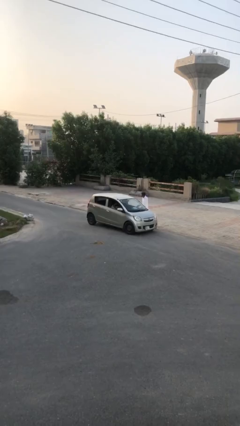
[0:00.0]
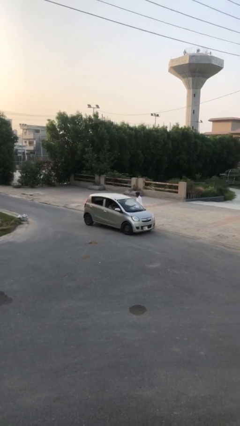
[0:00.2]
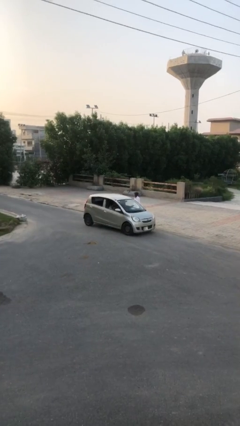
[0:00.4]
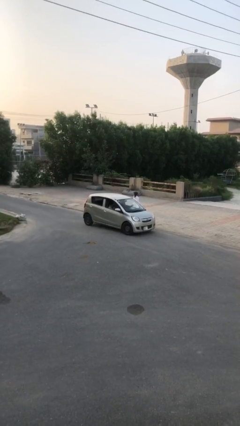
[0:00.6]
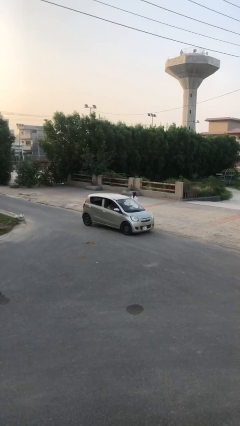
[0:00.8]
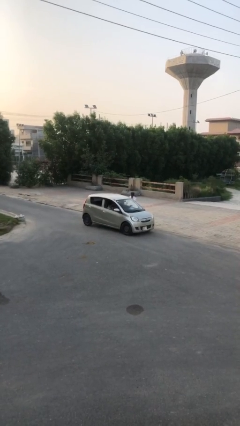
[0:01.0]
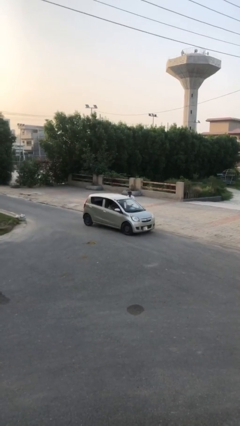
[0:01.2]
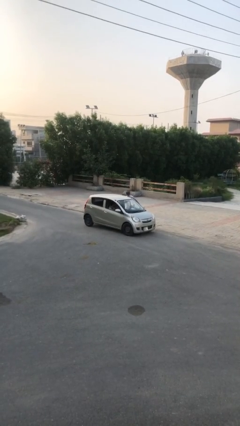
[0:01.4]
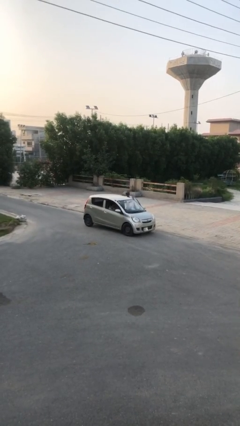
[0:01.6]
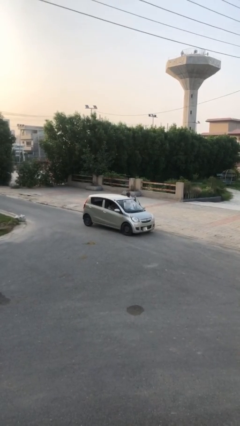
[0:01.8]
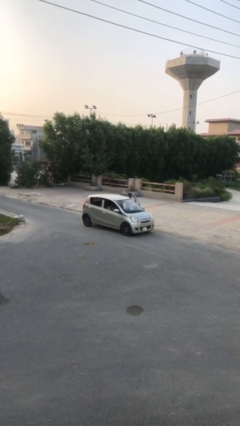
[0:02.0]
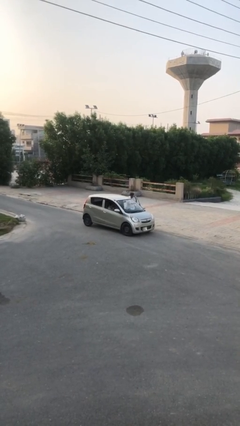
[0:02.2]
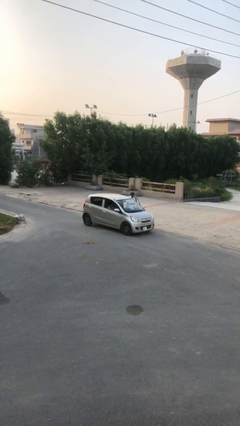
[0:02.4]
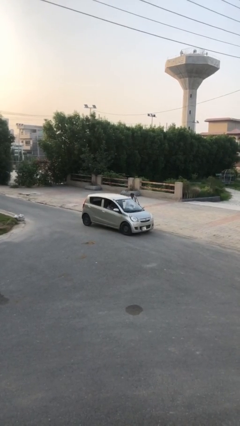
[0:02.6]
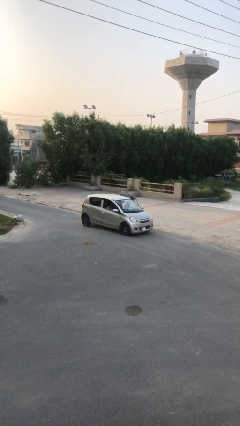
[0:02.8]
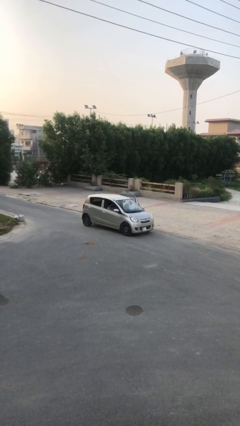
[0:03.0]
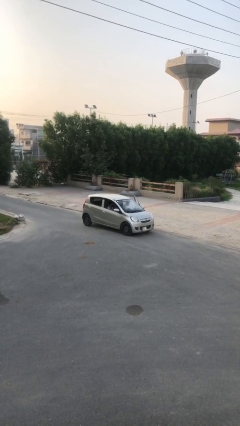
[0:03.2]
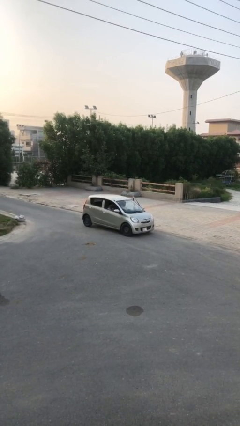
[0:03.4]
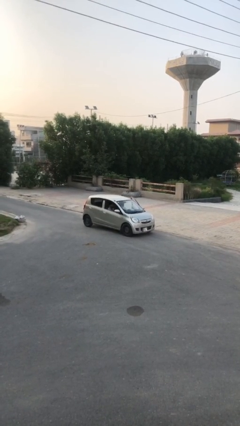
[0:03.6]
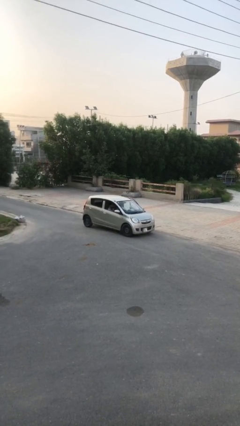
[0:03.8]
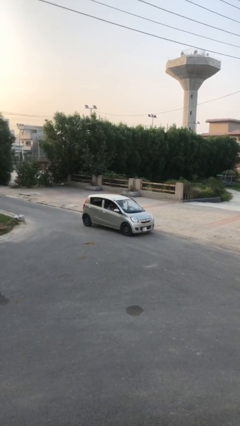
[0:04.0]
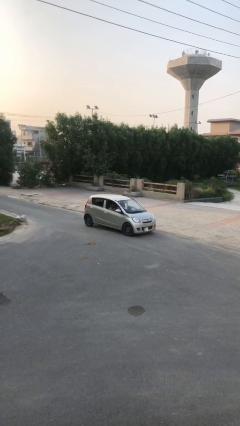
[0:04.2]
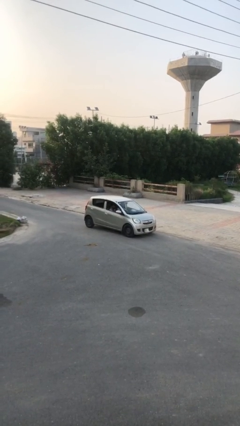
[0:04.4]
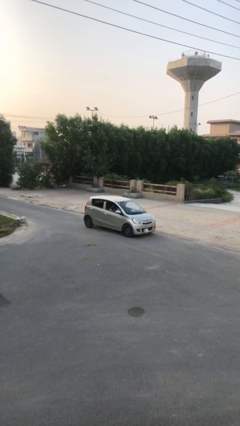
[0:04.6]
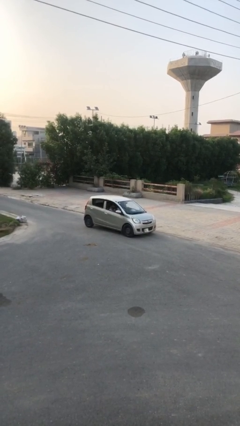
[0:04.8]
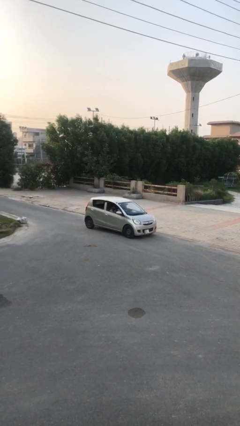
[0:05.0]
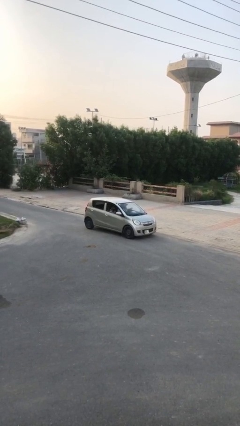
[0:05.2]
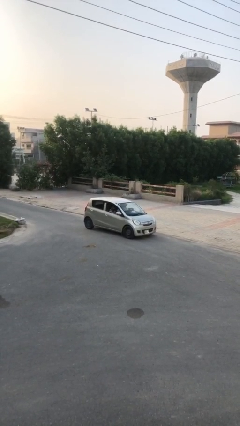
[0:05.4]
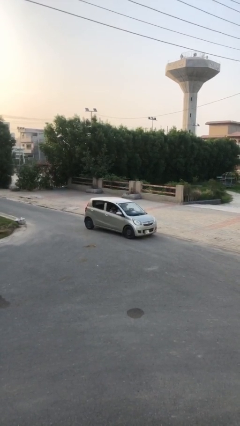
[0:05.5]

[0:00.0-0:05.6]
car picks up person

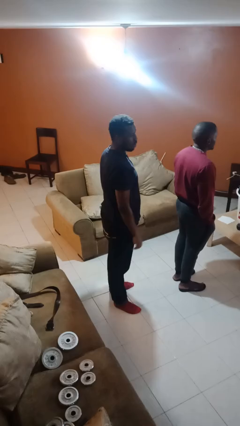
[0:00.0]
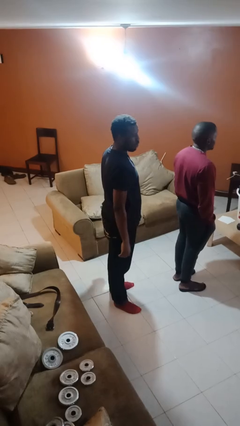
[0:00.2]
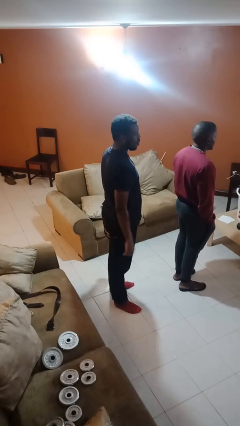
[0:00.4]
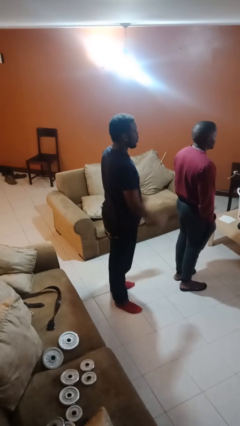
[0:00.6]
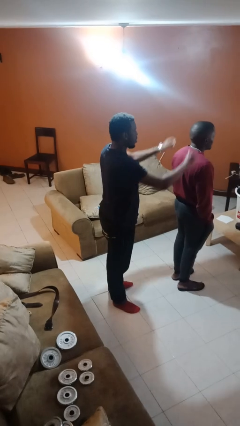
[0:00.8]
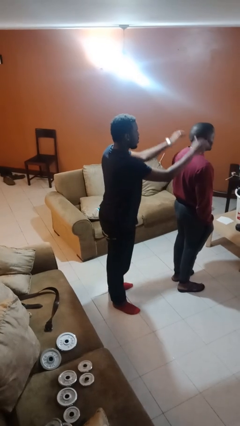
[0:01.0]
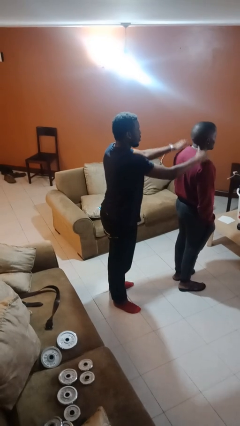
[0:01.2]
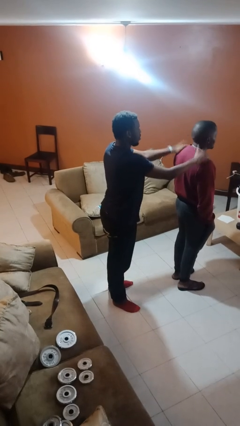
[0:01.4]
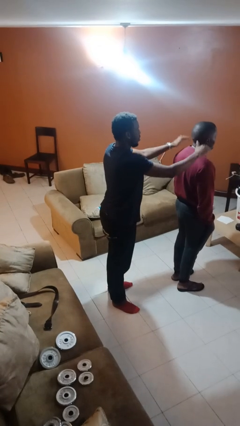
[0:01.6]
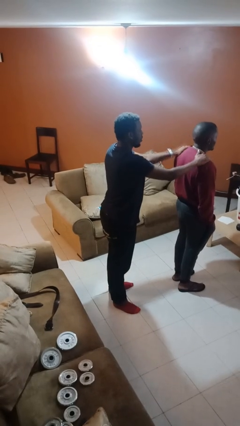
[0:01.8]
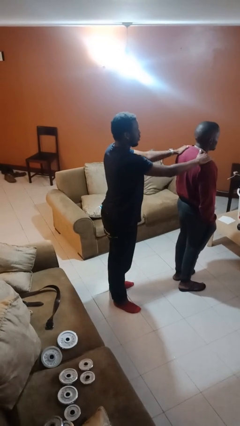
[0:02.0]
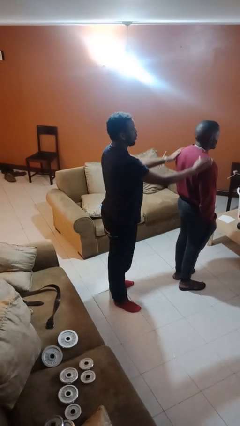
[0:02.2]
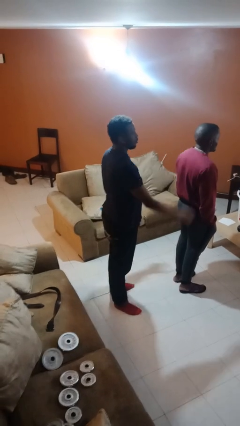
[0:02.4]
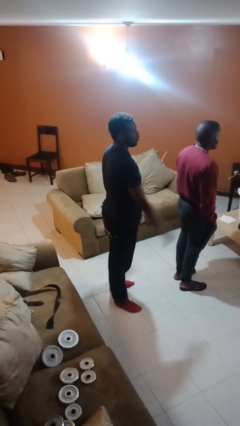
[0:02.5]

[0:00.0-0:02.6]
person pounds shoulders of person

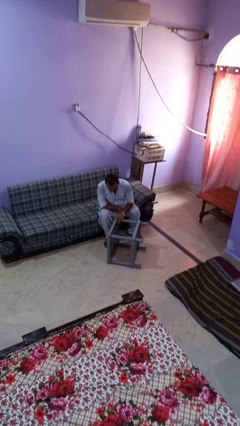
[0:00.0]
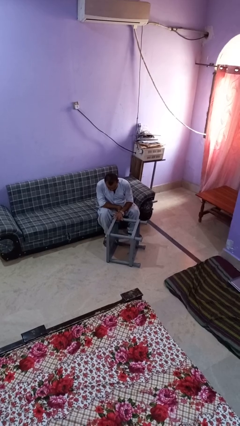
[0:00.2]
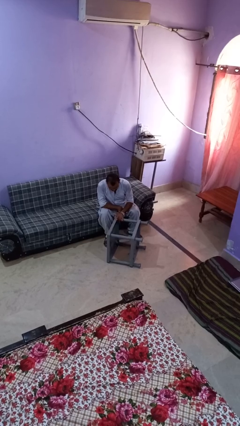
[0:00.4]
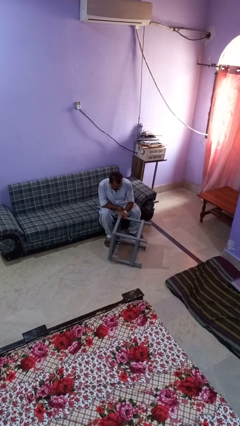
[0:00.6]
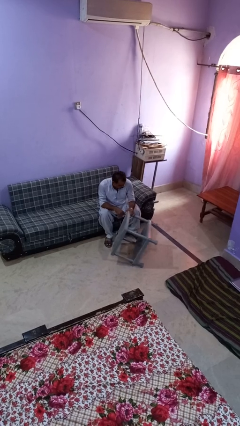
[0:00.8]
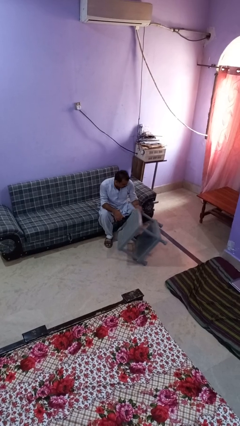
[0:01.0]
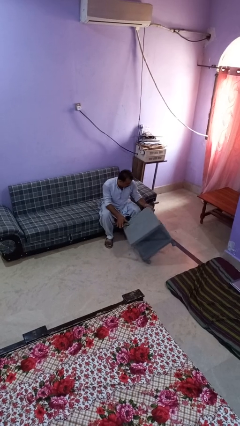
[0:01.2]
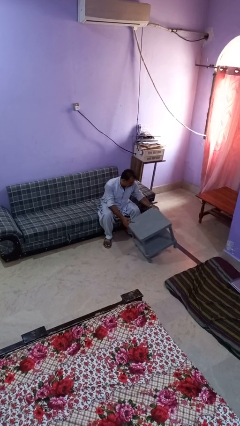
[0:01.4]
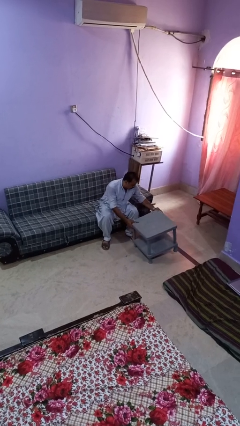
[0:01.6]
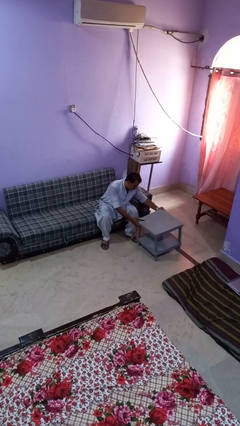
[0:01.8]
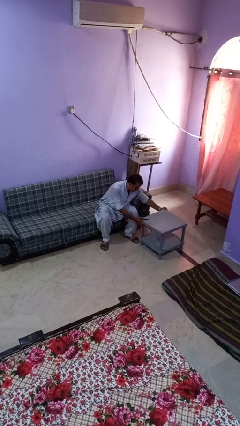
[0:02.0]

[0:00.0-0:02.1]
person sets upright furniture

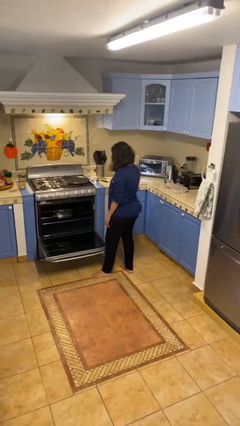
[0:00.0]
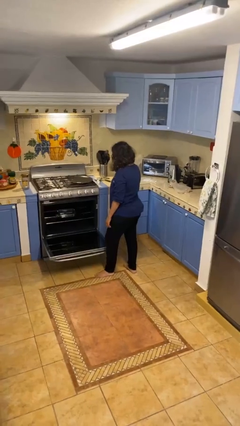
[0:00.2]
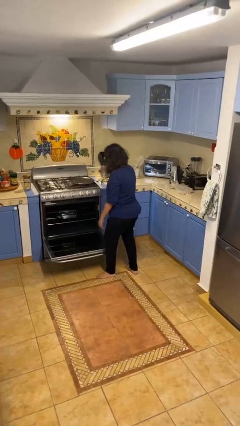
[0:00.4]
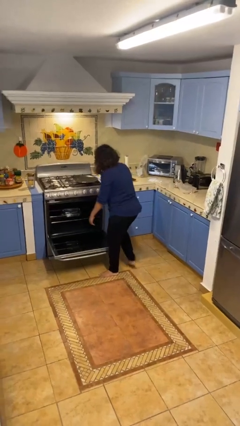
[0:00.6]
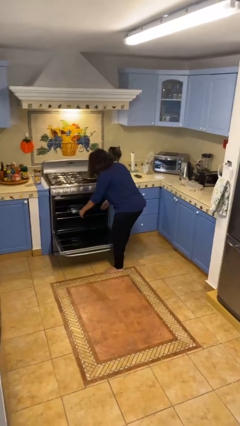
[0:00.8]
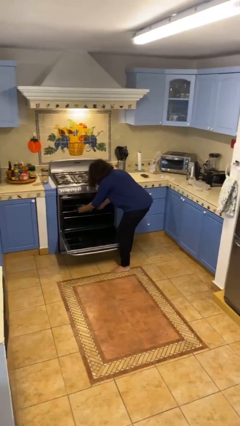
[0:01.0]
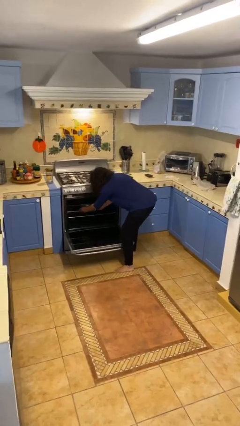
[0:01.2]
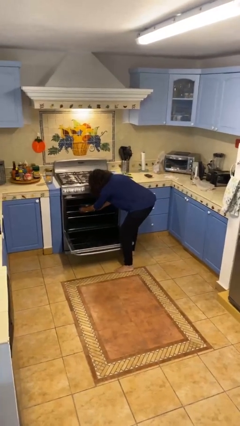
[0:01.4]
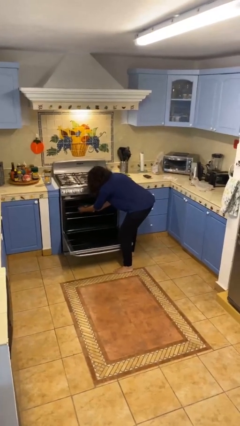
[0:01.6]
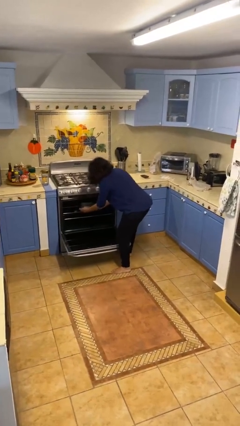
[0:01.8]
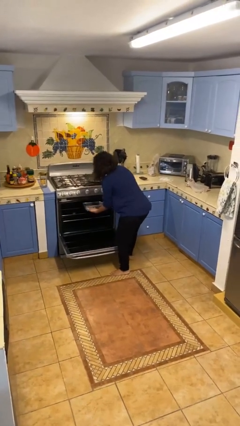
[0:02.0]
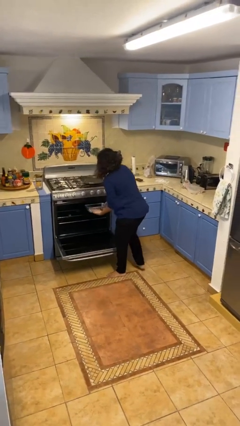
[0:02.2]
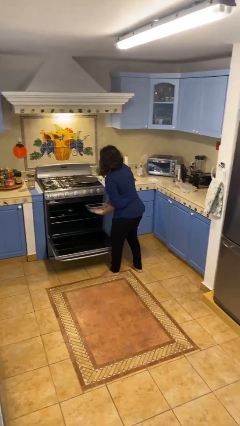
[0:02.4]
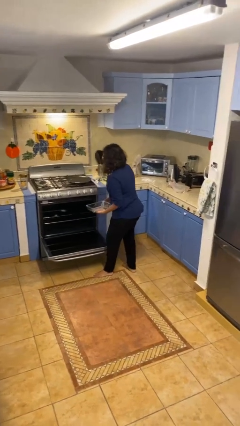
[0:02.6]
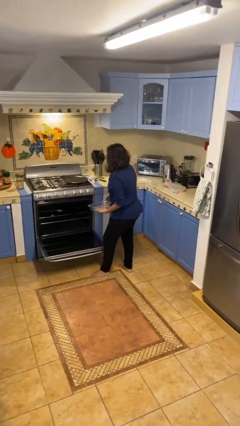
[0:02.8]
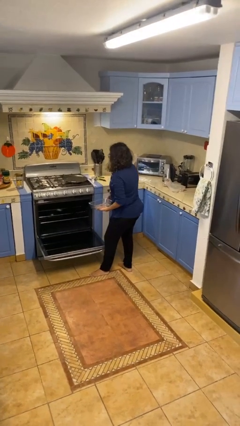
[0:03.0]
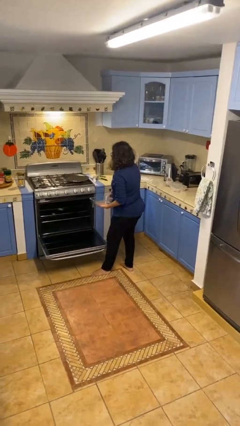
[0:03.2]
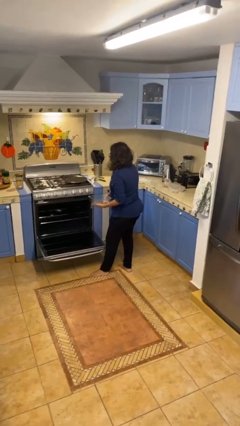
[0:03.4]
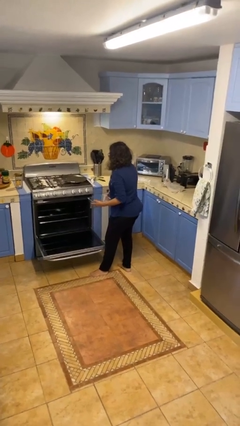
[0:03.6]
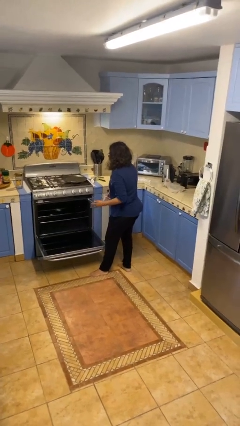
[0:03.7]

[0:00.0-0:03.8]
person takes object from oven

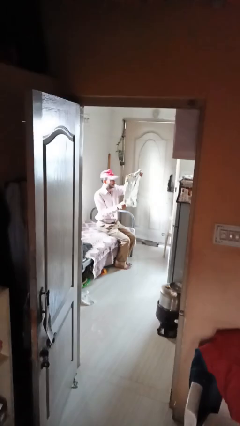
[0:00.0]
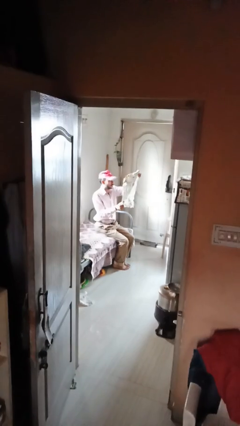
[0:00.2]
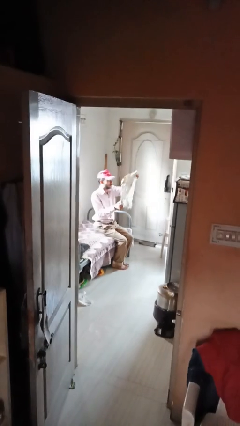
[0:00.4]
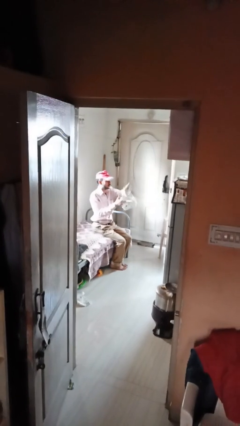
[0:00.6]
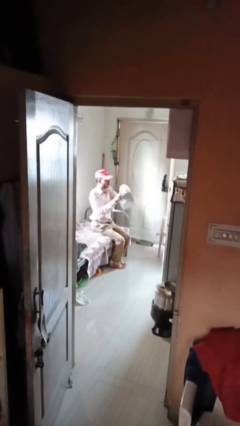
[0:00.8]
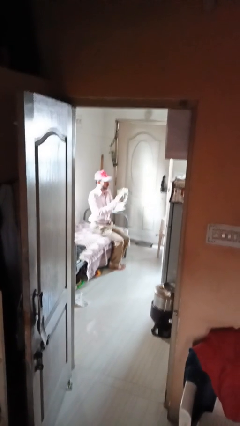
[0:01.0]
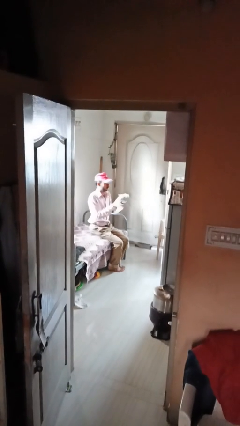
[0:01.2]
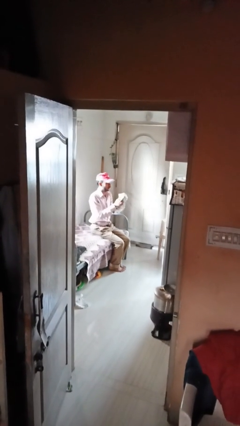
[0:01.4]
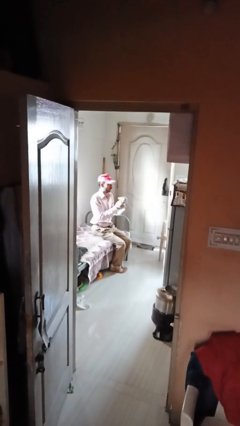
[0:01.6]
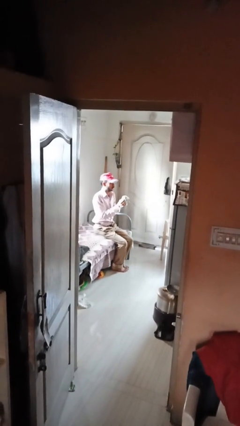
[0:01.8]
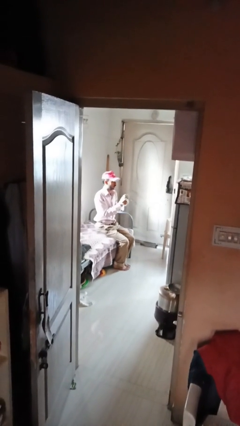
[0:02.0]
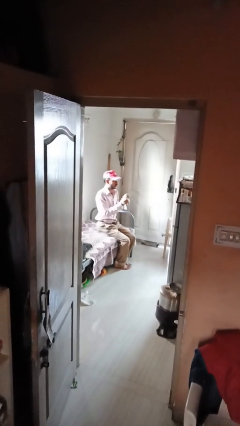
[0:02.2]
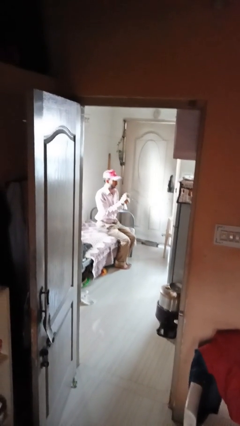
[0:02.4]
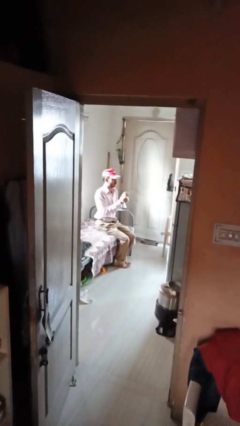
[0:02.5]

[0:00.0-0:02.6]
person crumples paper

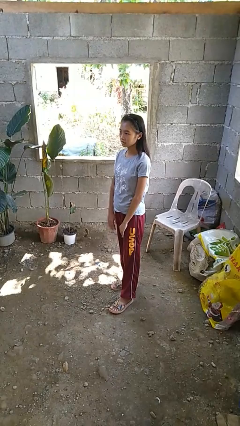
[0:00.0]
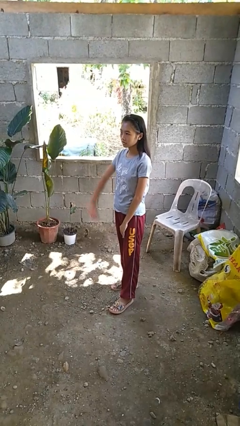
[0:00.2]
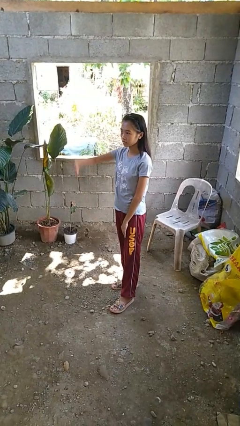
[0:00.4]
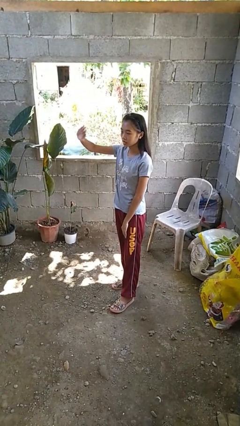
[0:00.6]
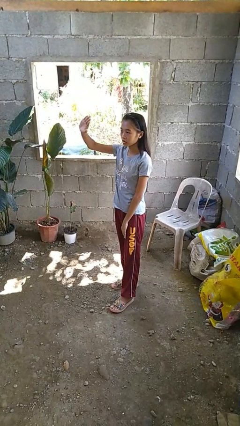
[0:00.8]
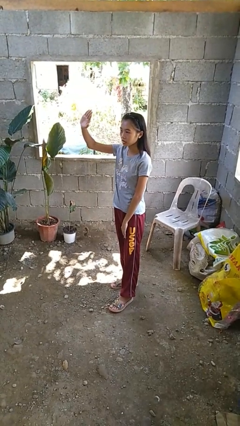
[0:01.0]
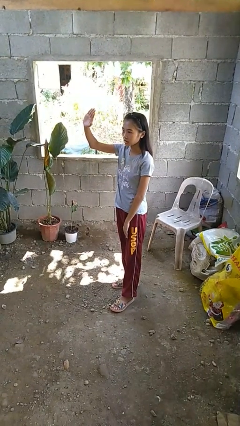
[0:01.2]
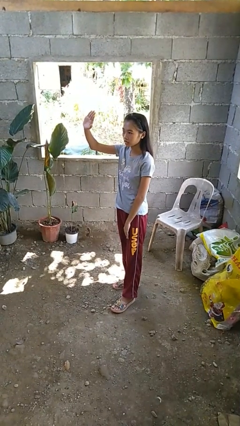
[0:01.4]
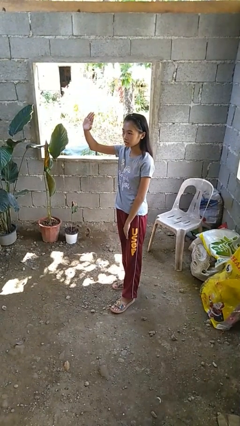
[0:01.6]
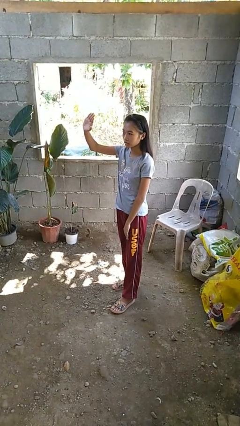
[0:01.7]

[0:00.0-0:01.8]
person gestures swipe up
